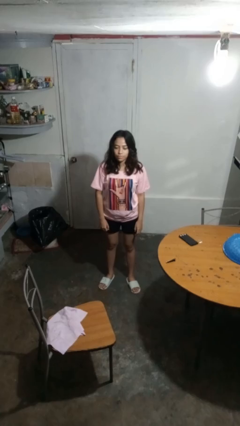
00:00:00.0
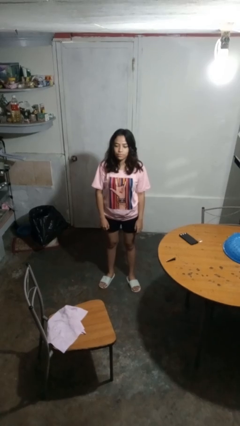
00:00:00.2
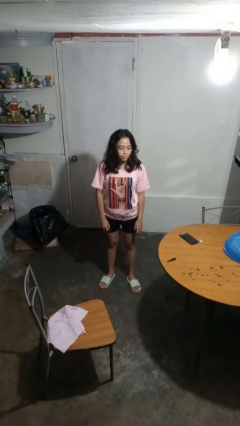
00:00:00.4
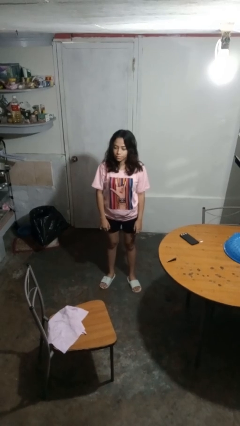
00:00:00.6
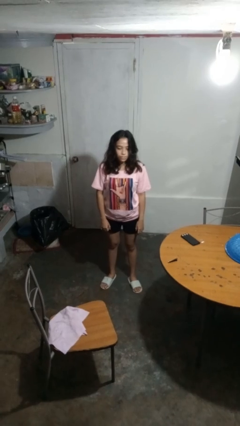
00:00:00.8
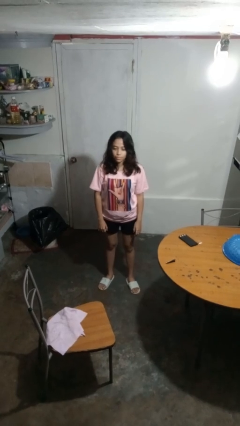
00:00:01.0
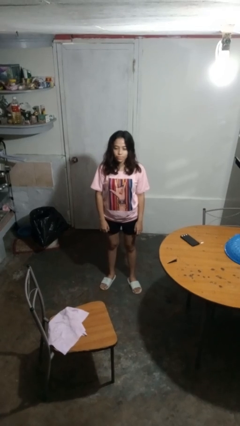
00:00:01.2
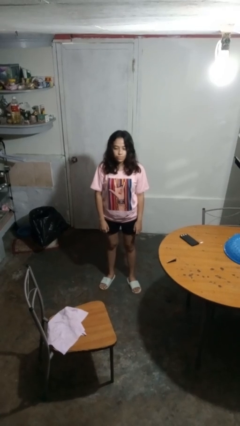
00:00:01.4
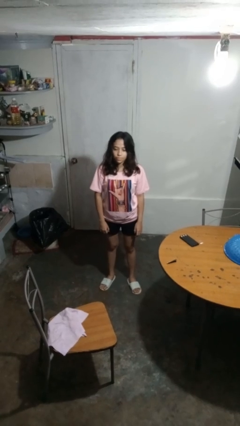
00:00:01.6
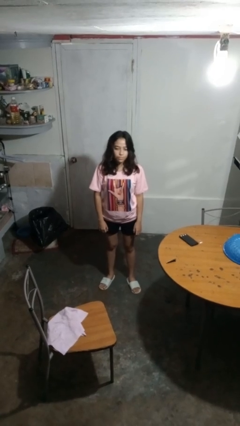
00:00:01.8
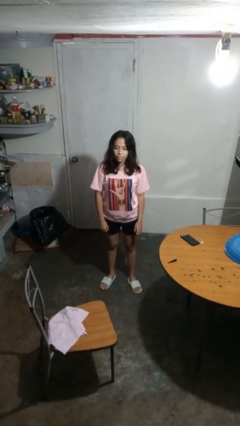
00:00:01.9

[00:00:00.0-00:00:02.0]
person shakes head

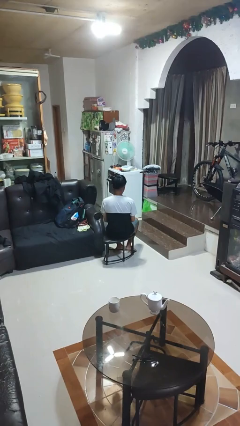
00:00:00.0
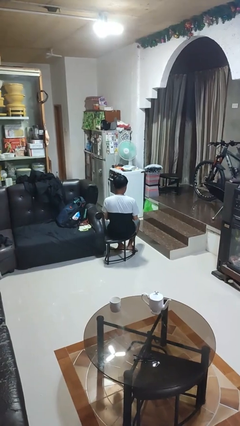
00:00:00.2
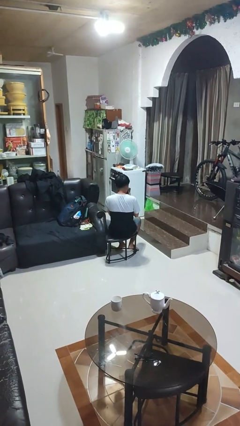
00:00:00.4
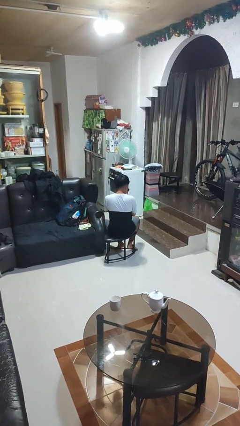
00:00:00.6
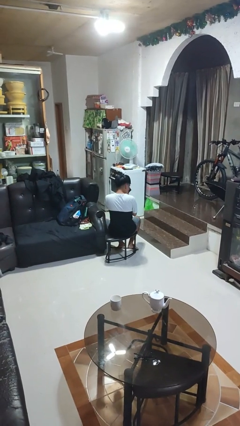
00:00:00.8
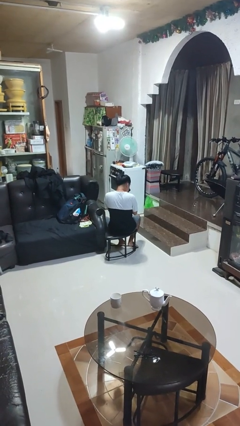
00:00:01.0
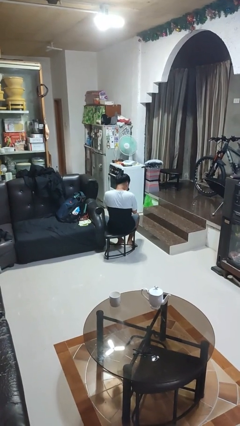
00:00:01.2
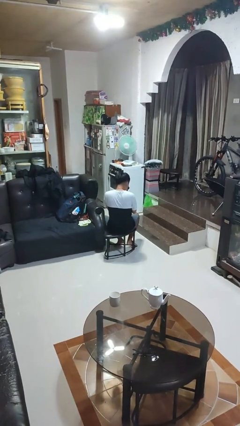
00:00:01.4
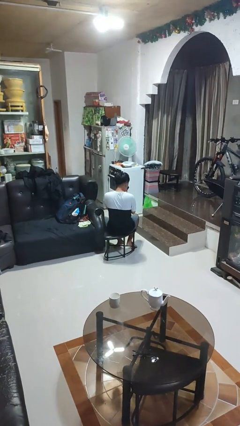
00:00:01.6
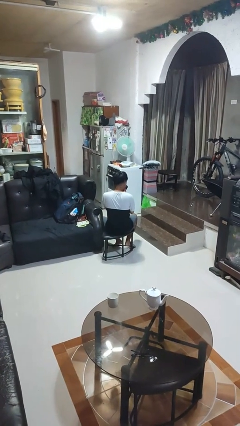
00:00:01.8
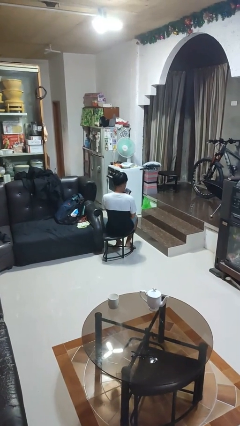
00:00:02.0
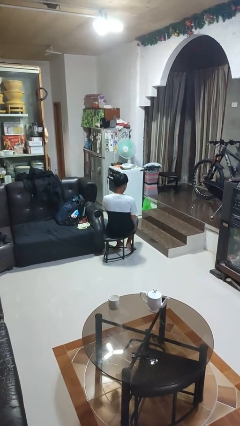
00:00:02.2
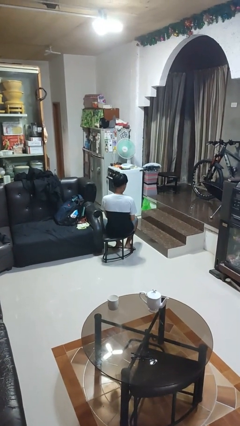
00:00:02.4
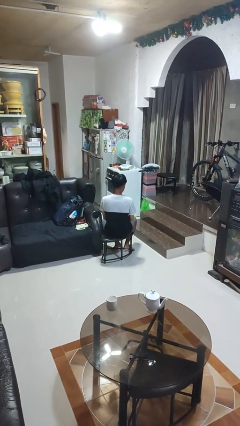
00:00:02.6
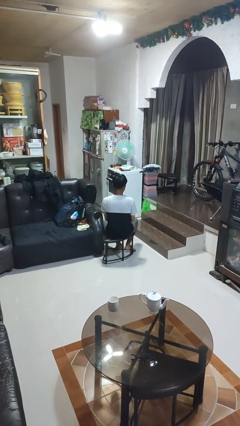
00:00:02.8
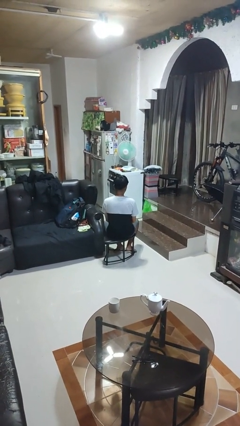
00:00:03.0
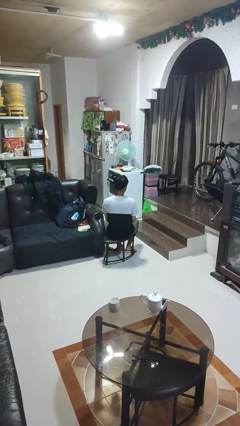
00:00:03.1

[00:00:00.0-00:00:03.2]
person dries hair with hairdryer

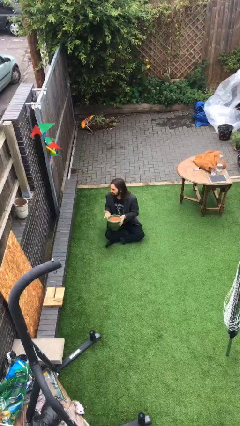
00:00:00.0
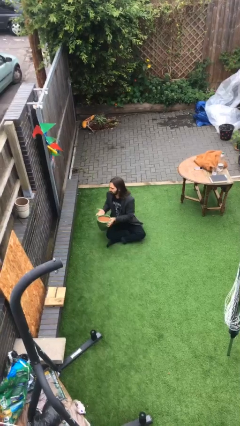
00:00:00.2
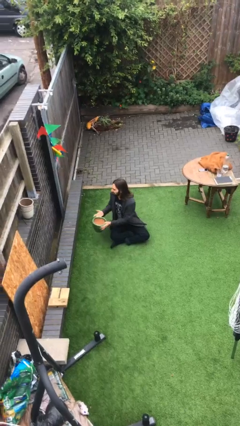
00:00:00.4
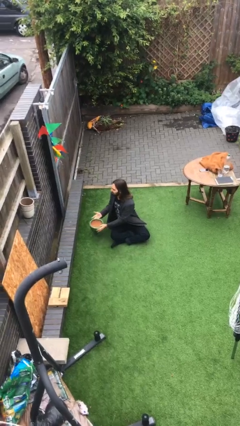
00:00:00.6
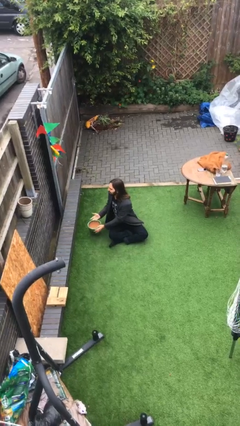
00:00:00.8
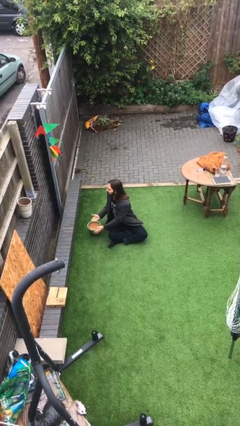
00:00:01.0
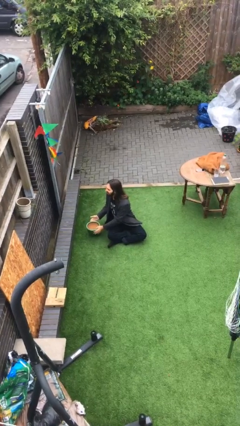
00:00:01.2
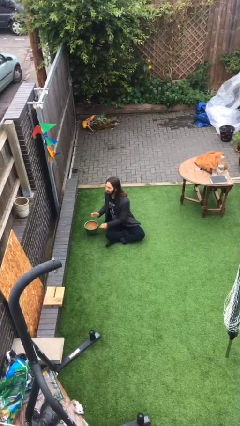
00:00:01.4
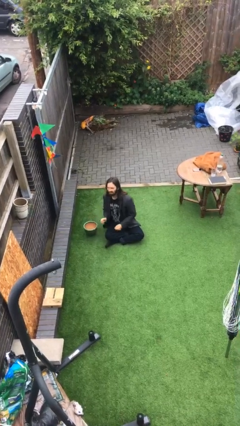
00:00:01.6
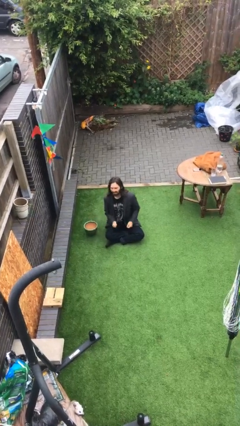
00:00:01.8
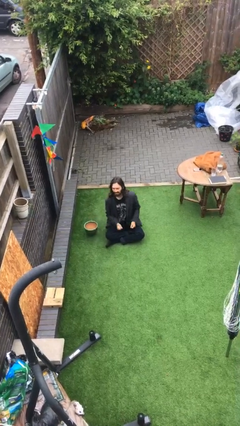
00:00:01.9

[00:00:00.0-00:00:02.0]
person puts down object on floor

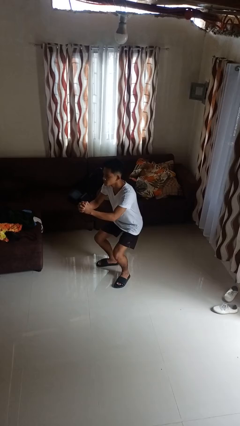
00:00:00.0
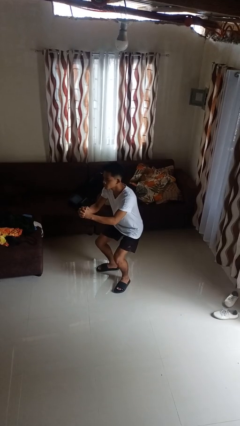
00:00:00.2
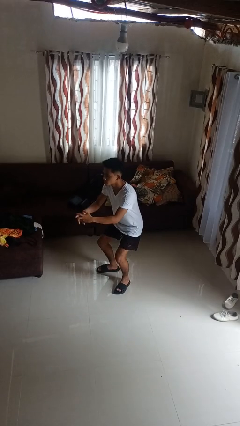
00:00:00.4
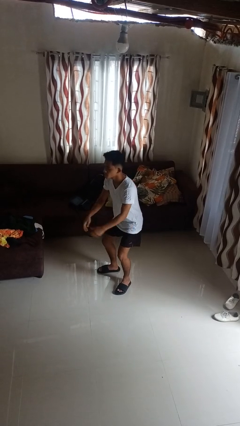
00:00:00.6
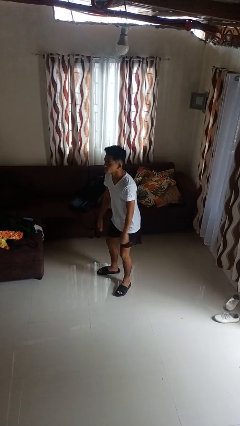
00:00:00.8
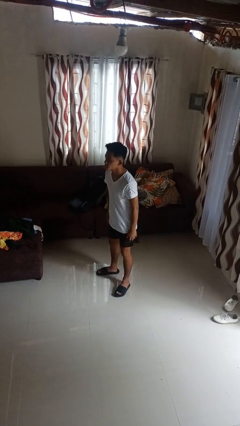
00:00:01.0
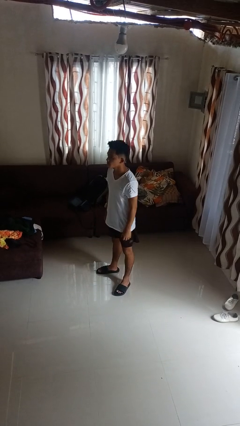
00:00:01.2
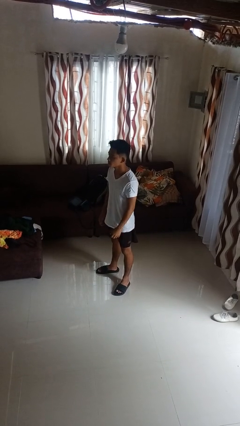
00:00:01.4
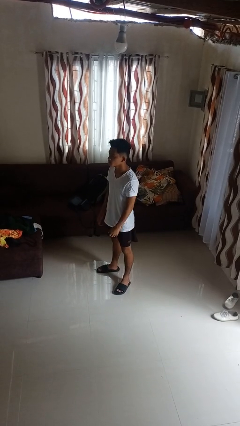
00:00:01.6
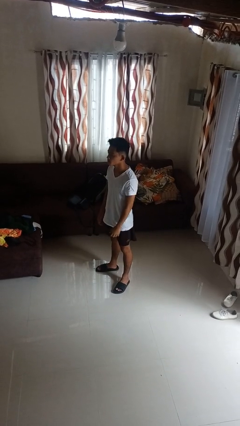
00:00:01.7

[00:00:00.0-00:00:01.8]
person stands up

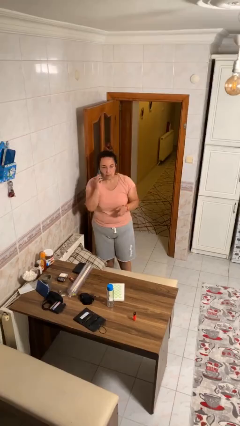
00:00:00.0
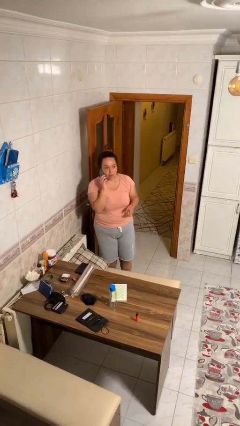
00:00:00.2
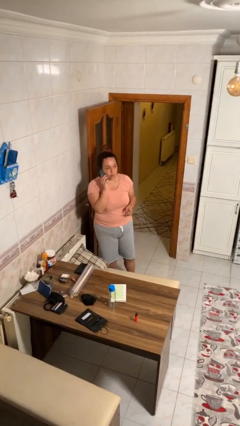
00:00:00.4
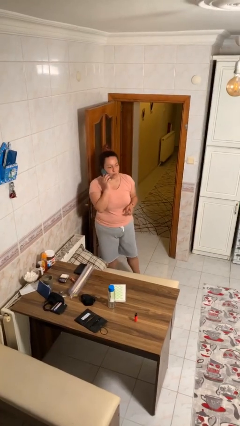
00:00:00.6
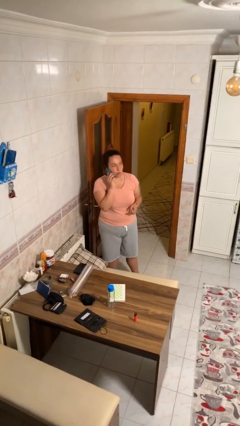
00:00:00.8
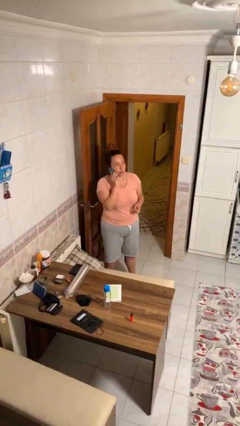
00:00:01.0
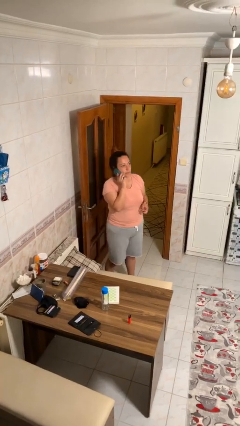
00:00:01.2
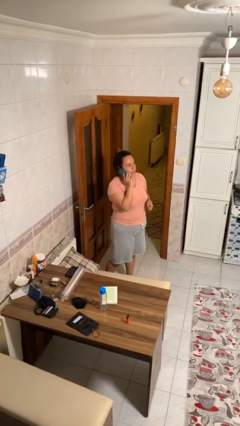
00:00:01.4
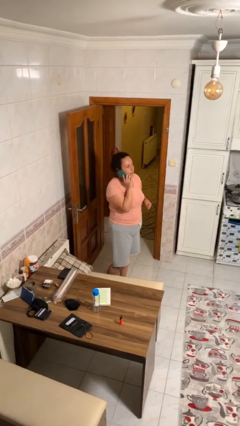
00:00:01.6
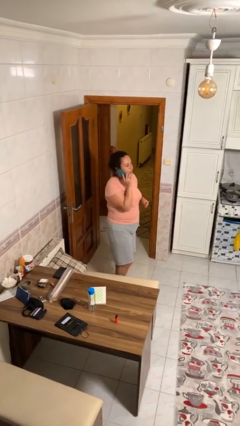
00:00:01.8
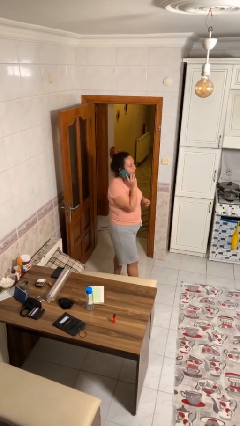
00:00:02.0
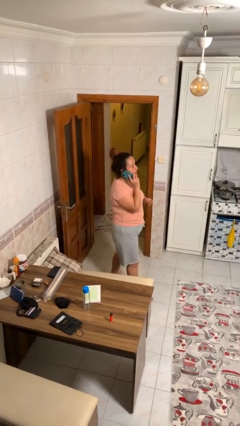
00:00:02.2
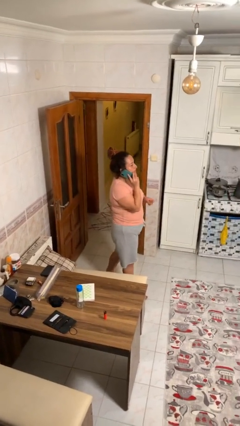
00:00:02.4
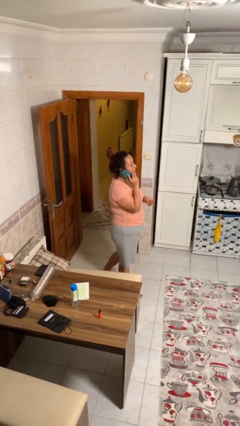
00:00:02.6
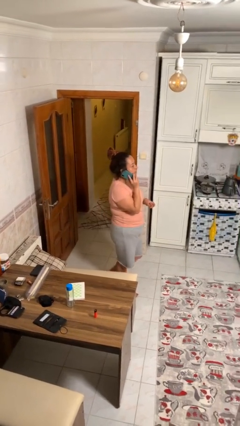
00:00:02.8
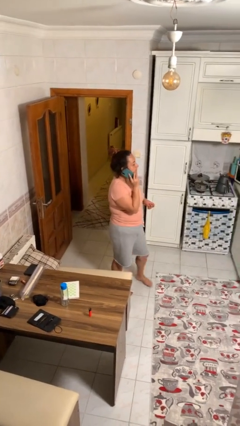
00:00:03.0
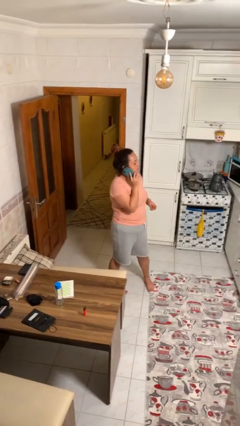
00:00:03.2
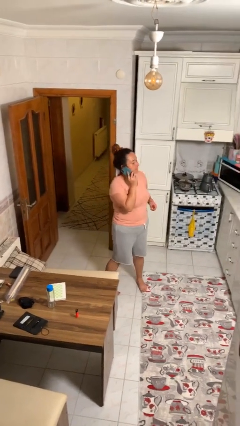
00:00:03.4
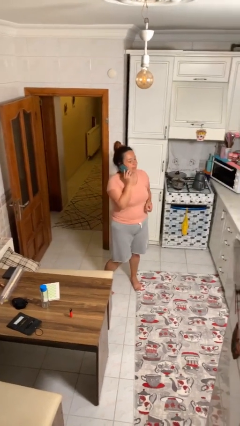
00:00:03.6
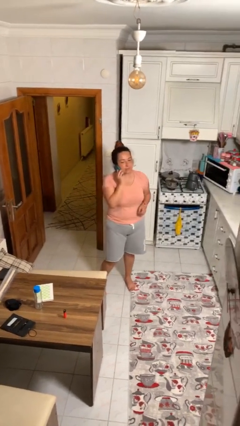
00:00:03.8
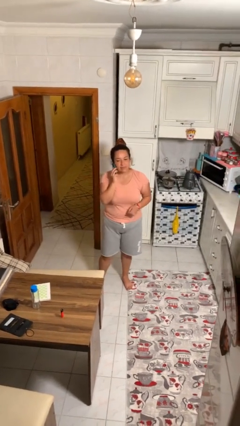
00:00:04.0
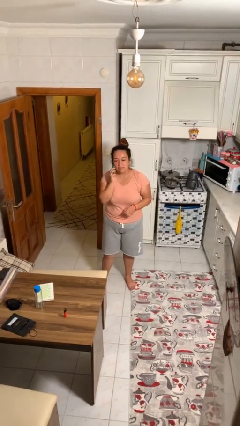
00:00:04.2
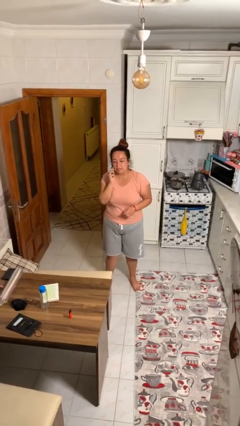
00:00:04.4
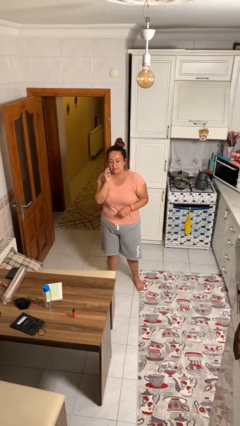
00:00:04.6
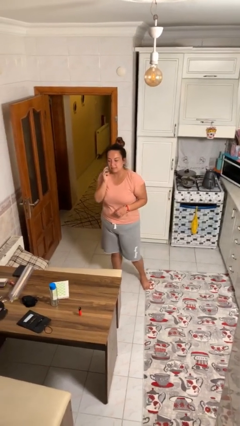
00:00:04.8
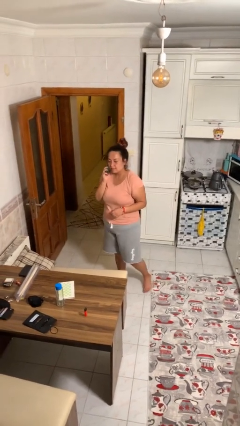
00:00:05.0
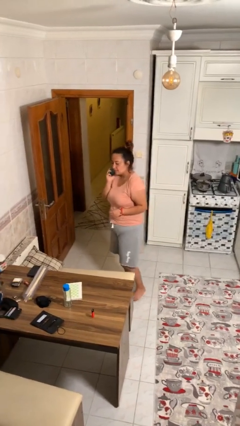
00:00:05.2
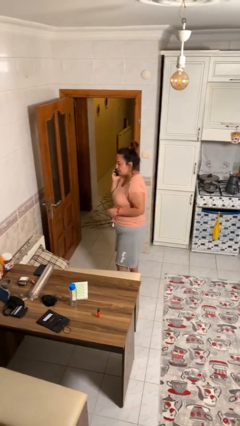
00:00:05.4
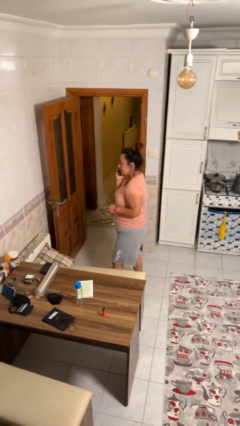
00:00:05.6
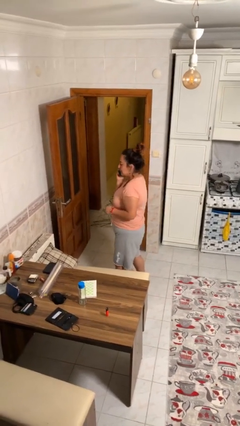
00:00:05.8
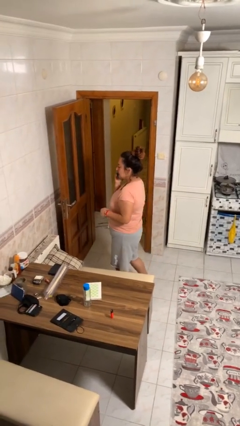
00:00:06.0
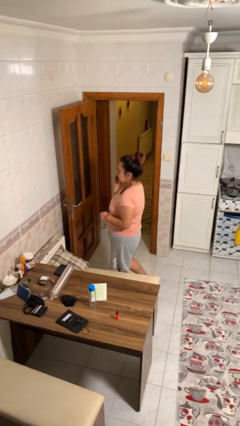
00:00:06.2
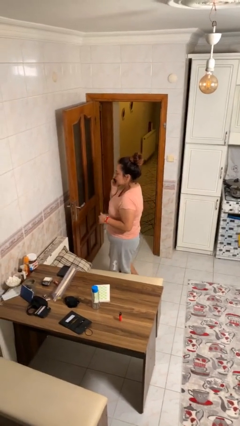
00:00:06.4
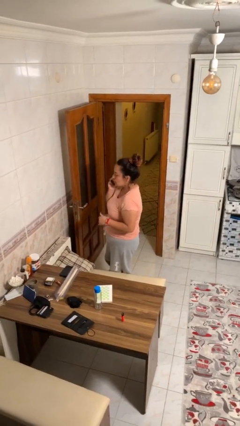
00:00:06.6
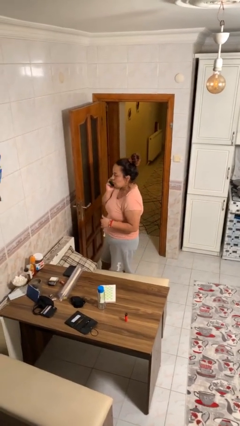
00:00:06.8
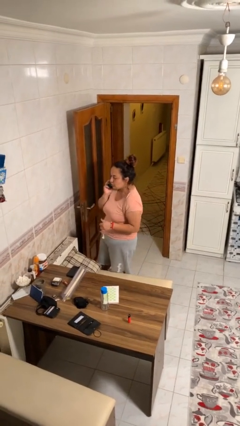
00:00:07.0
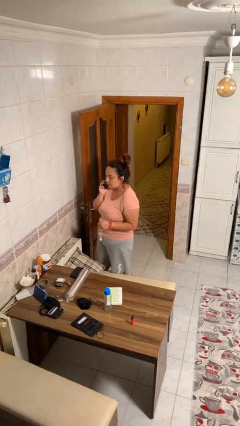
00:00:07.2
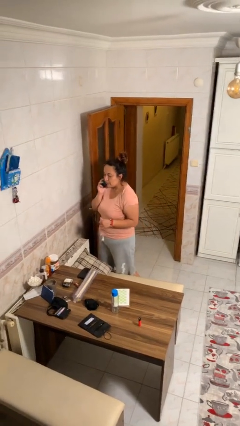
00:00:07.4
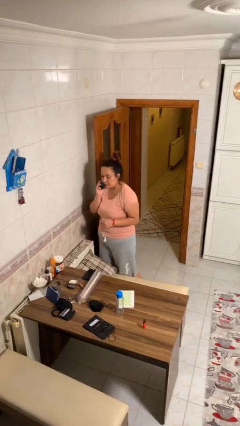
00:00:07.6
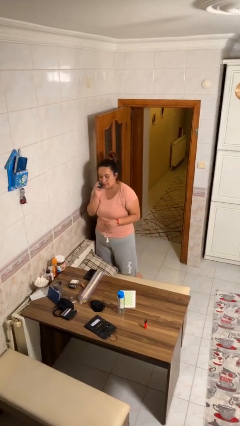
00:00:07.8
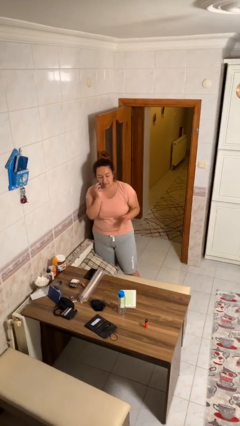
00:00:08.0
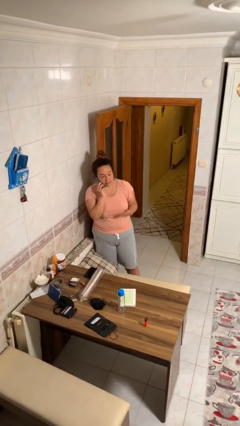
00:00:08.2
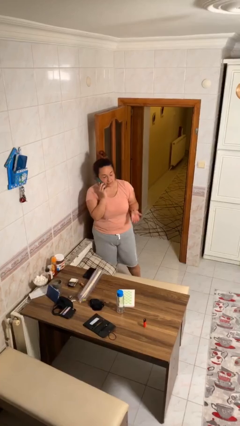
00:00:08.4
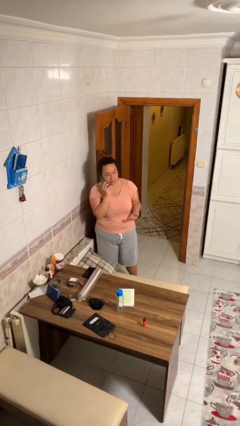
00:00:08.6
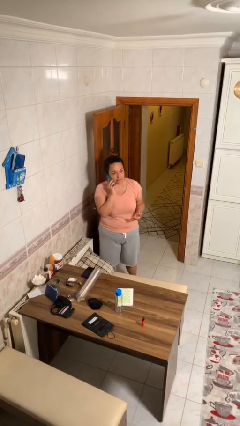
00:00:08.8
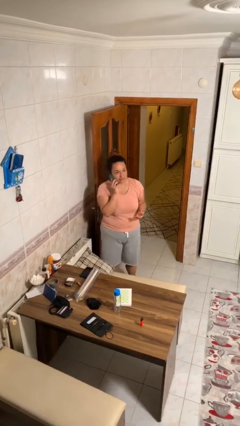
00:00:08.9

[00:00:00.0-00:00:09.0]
person talks on phone
